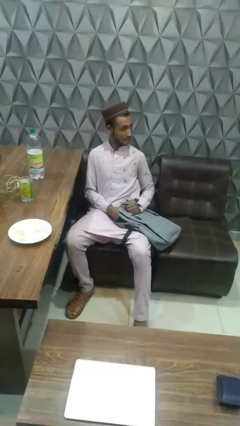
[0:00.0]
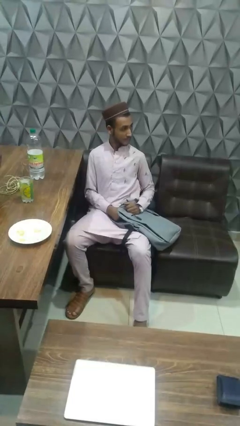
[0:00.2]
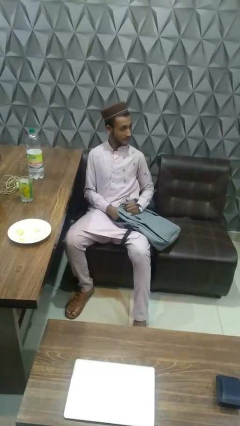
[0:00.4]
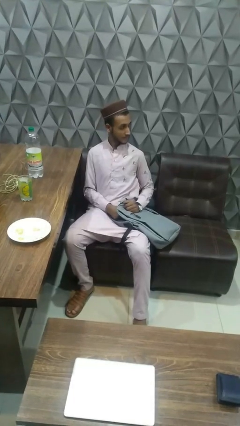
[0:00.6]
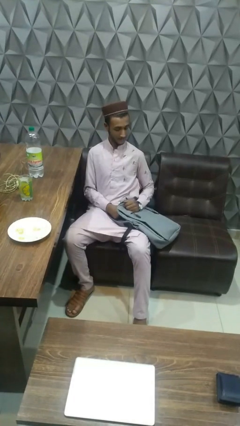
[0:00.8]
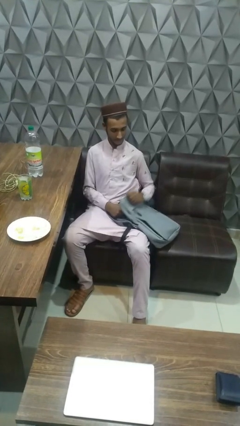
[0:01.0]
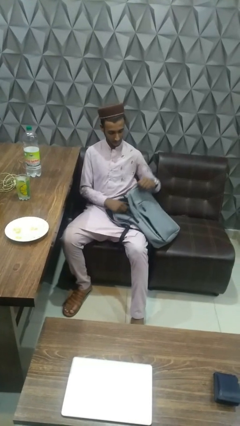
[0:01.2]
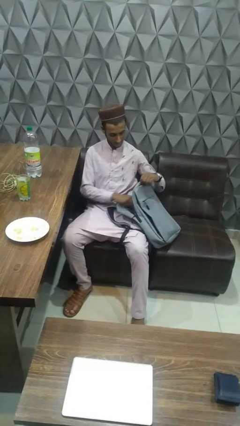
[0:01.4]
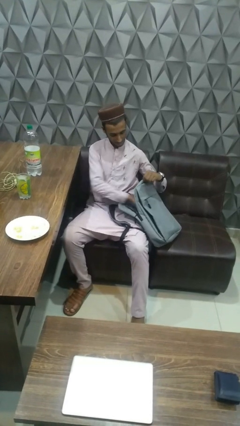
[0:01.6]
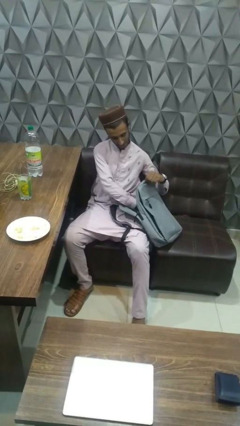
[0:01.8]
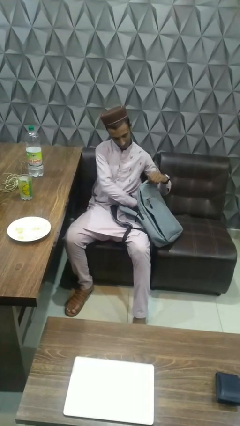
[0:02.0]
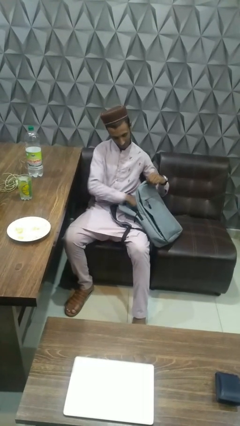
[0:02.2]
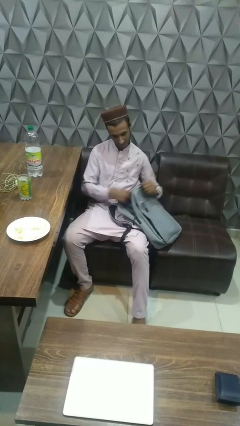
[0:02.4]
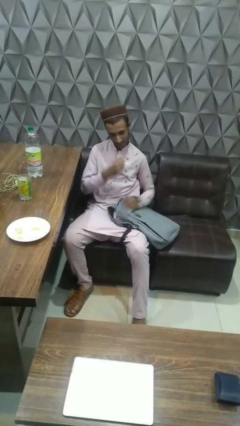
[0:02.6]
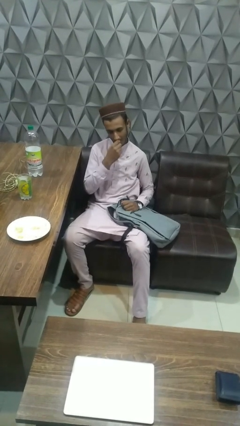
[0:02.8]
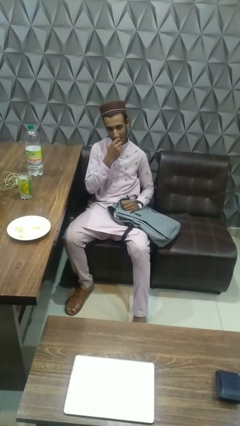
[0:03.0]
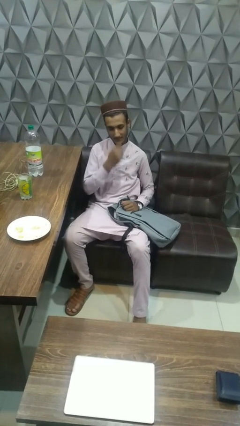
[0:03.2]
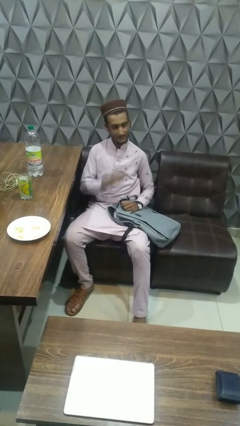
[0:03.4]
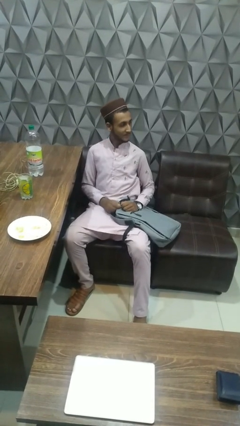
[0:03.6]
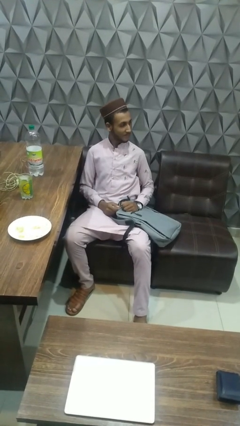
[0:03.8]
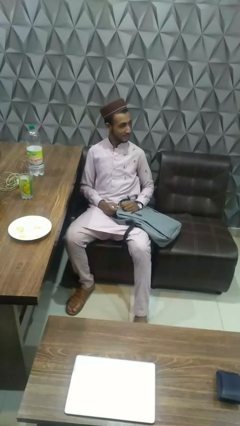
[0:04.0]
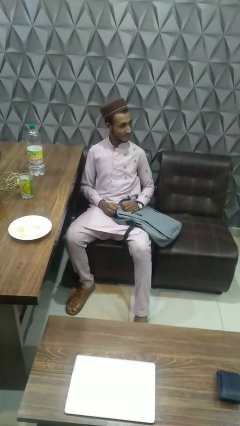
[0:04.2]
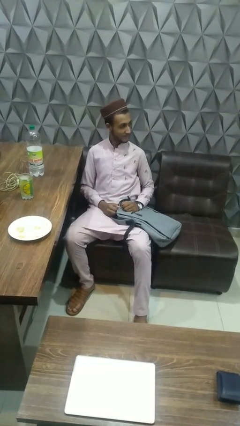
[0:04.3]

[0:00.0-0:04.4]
person eats snack from bag

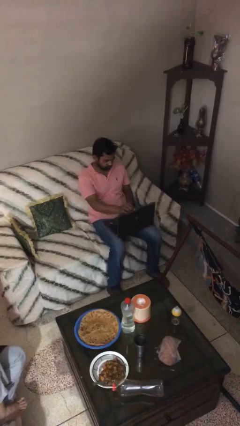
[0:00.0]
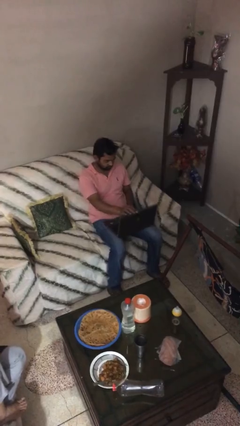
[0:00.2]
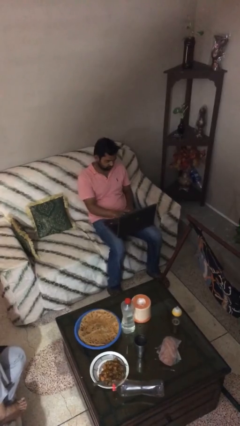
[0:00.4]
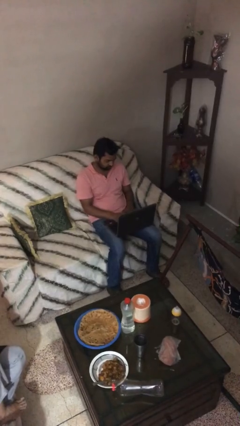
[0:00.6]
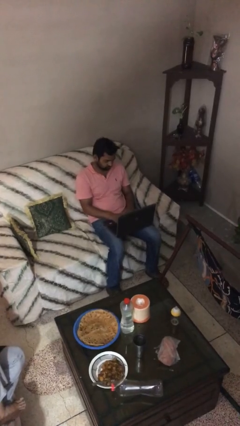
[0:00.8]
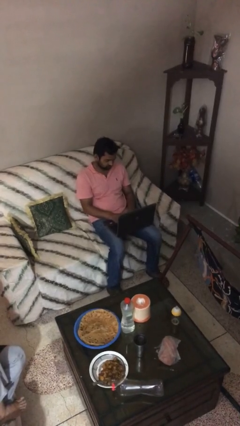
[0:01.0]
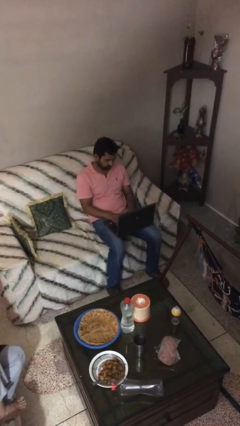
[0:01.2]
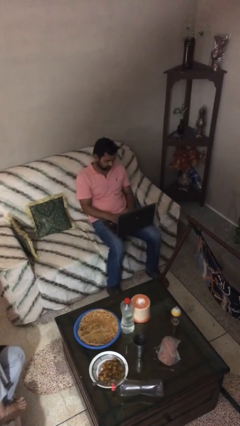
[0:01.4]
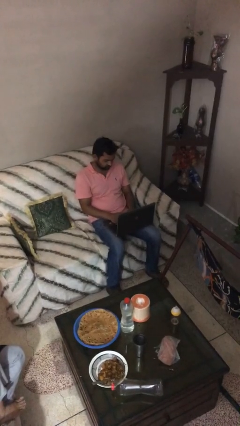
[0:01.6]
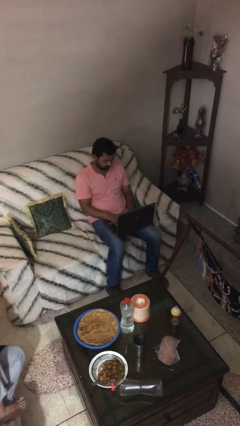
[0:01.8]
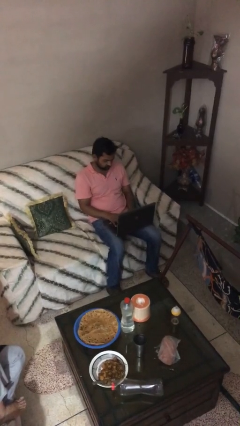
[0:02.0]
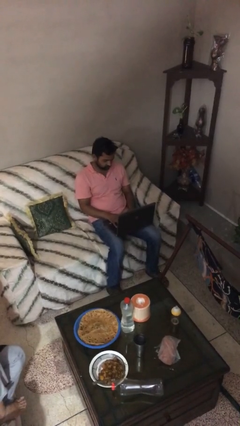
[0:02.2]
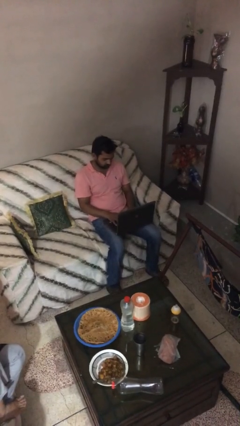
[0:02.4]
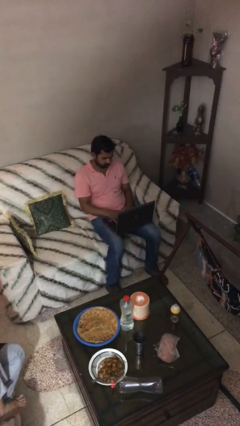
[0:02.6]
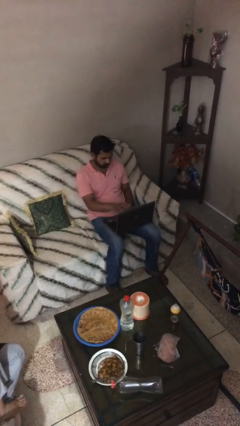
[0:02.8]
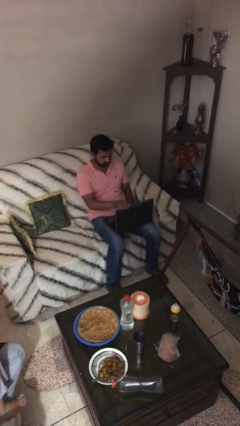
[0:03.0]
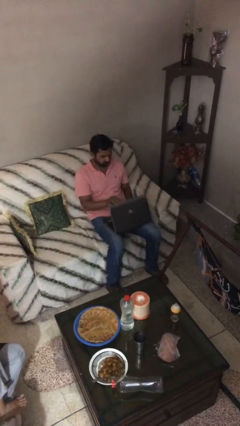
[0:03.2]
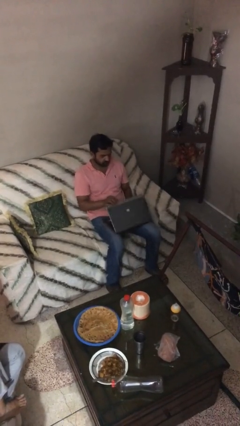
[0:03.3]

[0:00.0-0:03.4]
person interacts with laptop

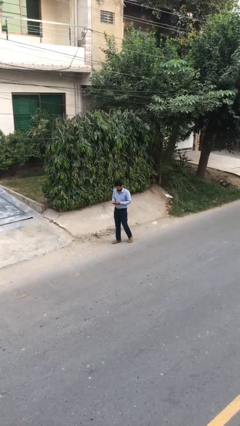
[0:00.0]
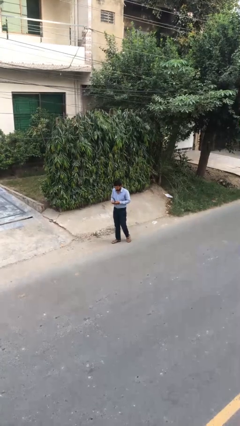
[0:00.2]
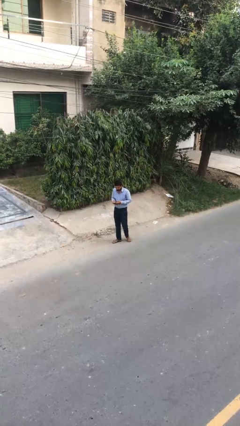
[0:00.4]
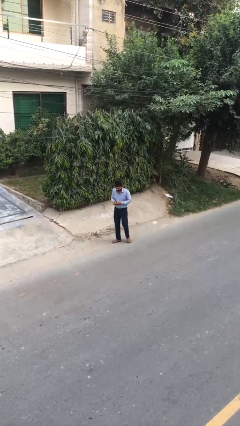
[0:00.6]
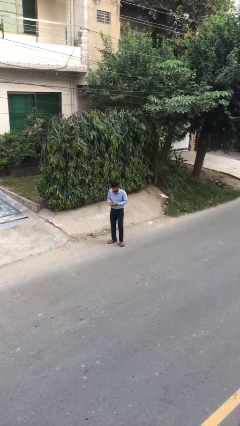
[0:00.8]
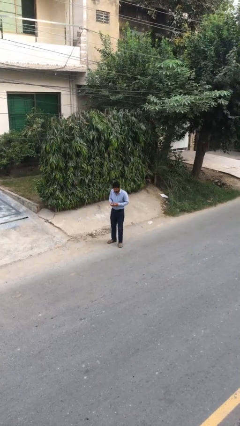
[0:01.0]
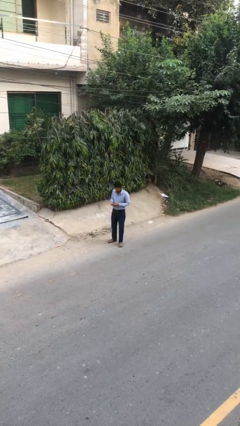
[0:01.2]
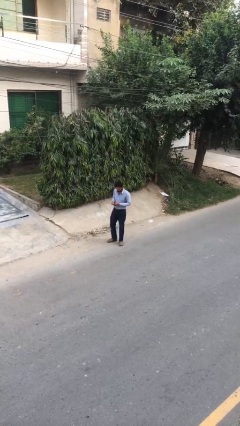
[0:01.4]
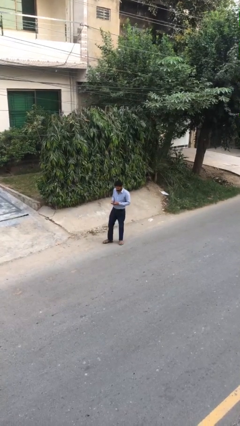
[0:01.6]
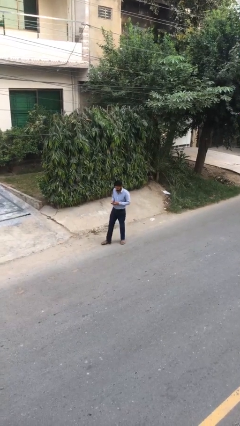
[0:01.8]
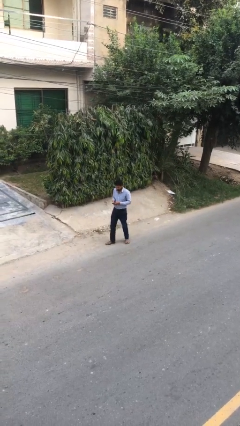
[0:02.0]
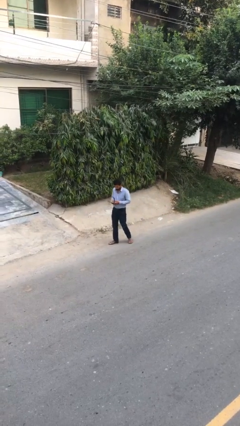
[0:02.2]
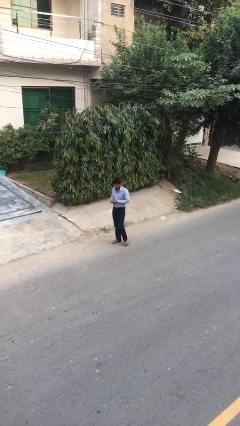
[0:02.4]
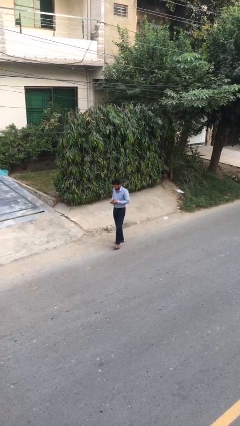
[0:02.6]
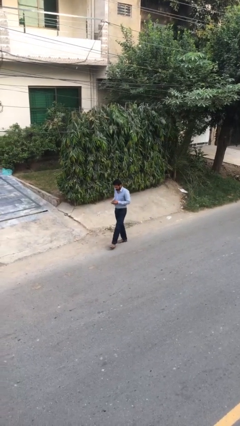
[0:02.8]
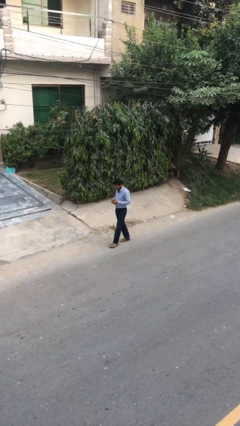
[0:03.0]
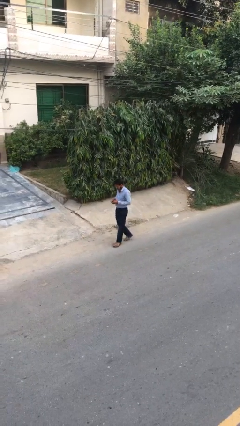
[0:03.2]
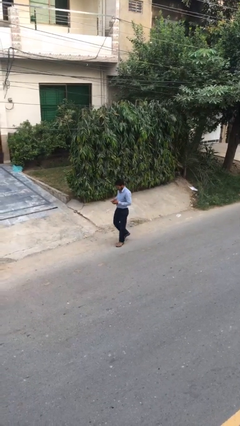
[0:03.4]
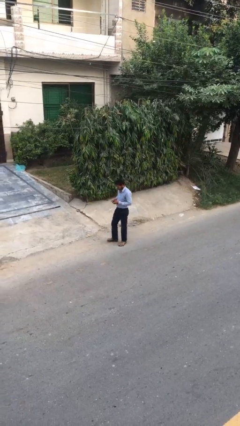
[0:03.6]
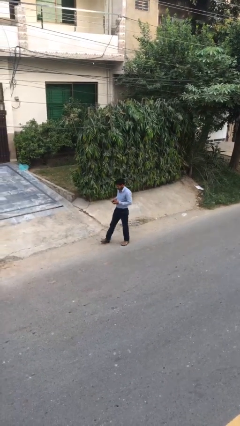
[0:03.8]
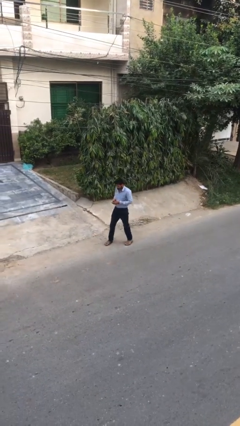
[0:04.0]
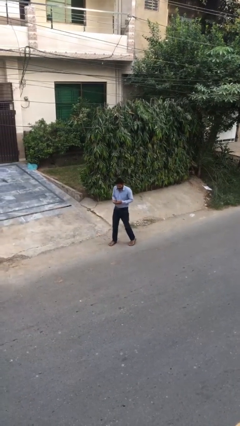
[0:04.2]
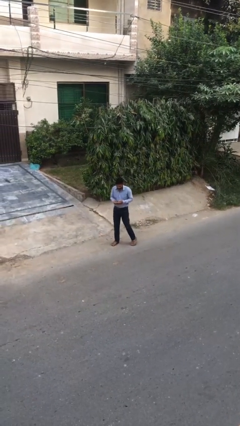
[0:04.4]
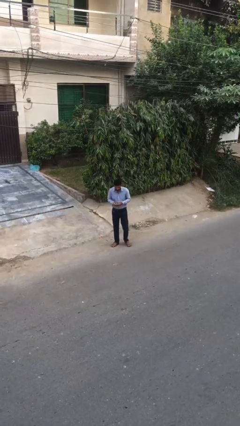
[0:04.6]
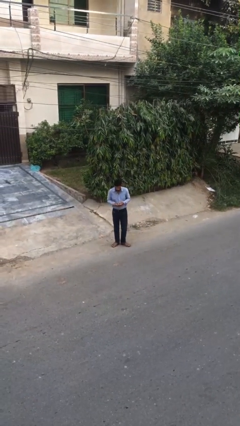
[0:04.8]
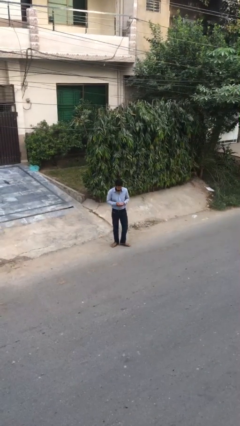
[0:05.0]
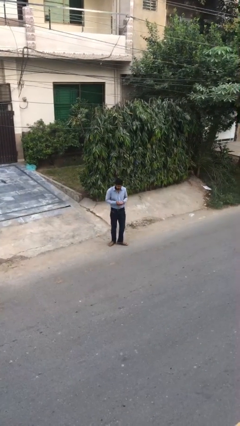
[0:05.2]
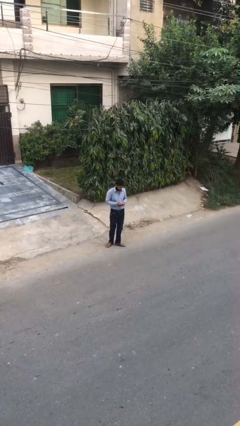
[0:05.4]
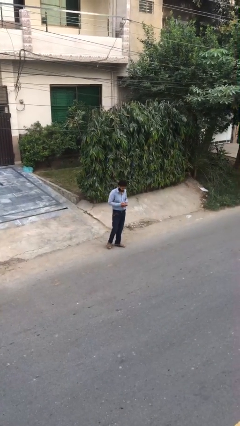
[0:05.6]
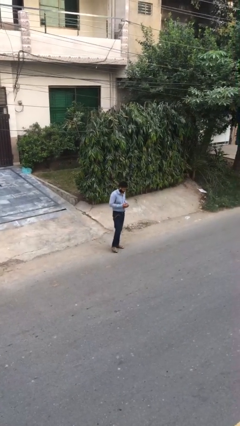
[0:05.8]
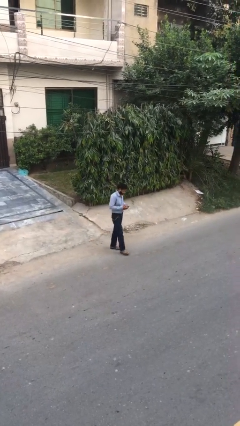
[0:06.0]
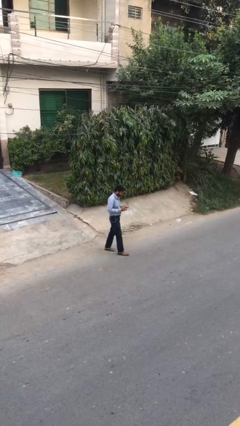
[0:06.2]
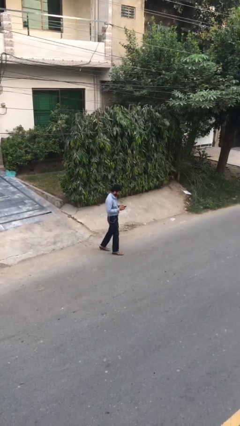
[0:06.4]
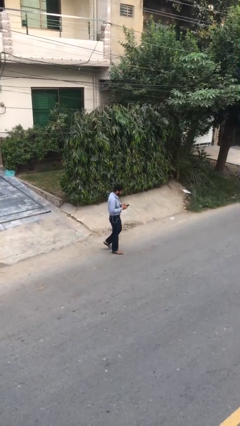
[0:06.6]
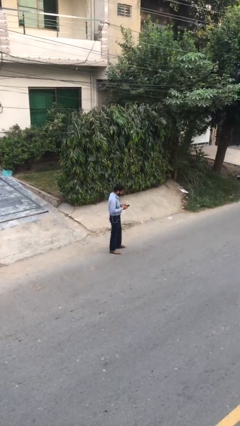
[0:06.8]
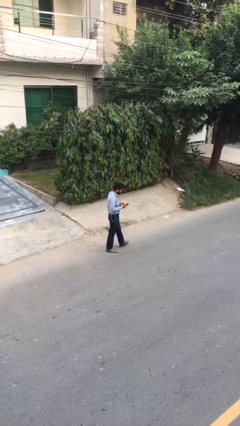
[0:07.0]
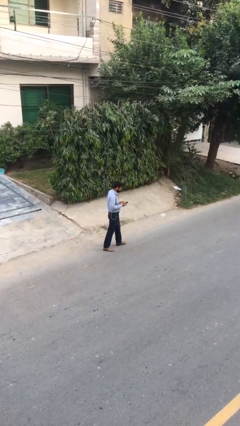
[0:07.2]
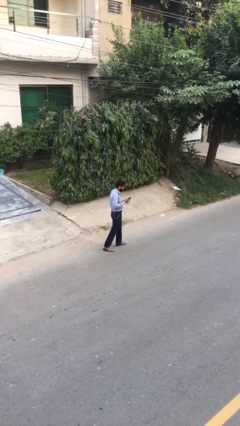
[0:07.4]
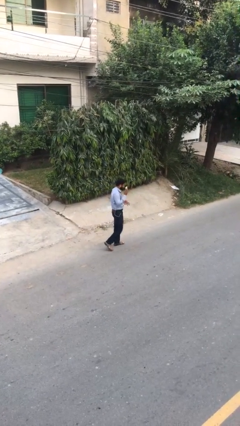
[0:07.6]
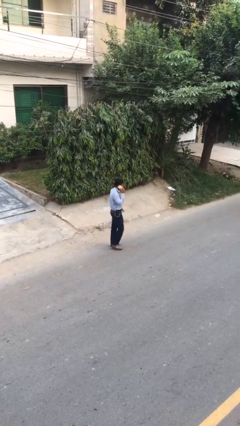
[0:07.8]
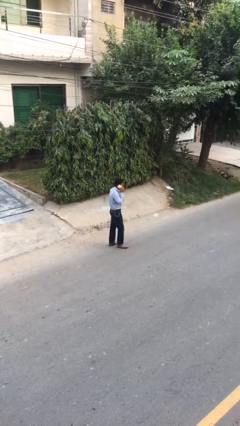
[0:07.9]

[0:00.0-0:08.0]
person texts on phone

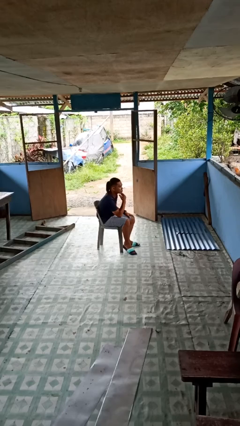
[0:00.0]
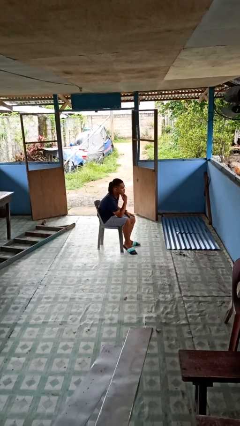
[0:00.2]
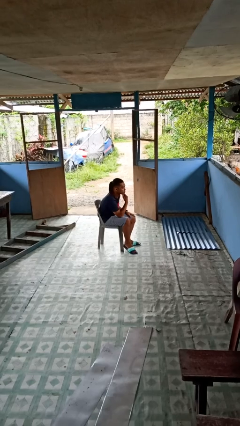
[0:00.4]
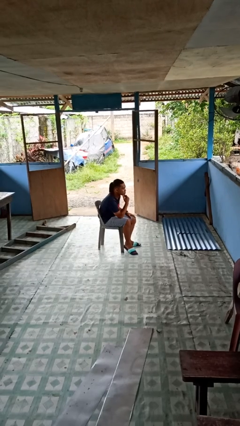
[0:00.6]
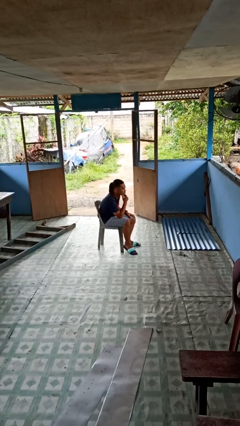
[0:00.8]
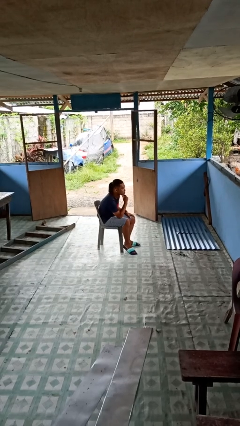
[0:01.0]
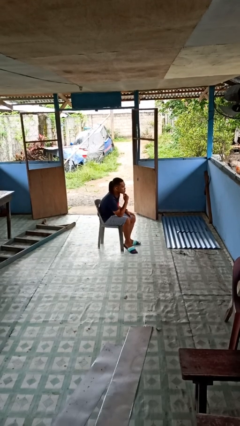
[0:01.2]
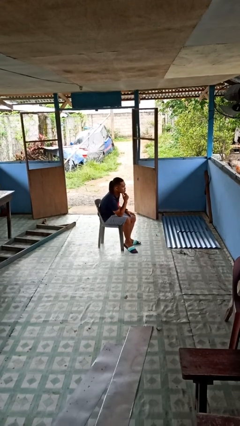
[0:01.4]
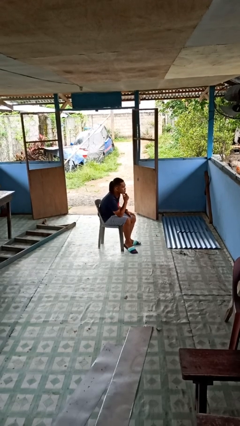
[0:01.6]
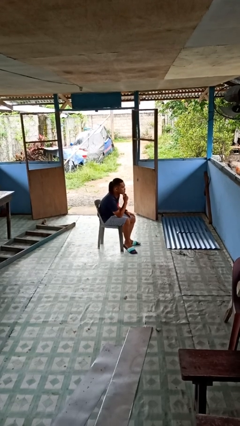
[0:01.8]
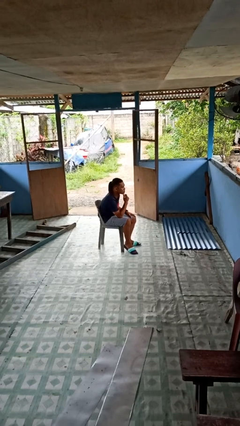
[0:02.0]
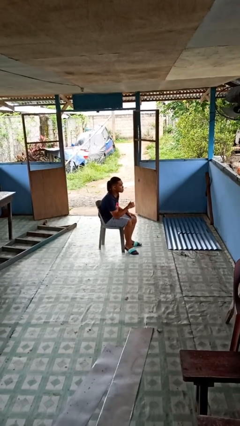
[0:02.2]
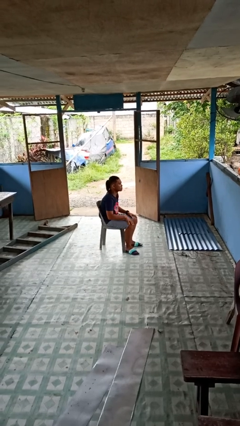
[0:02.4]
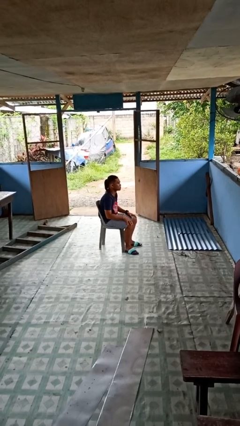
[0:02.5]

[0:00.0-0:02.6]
person strokes chin
